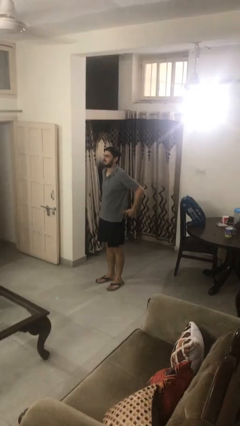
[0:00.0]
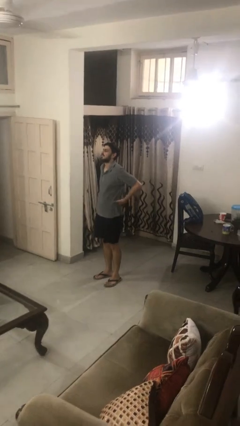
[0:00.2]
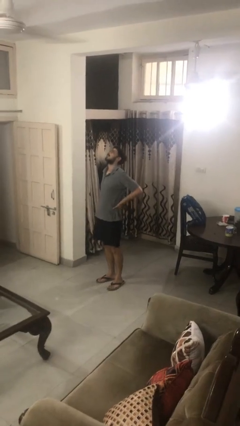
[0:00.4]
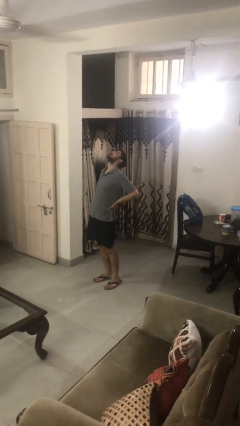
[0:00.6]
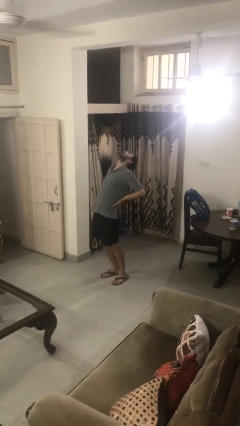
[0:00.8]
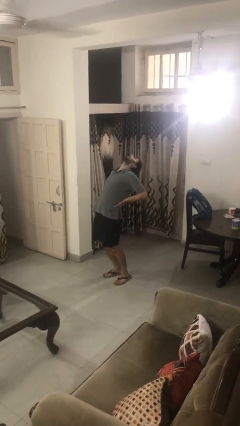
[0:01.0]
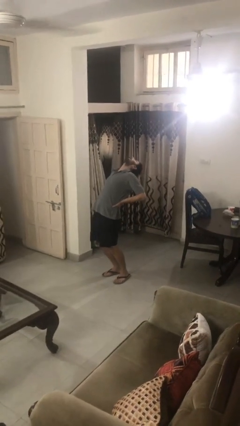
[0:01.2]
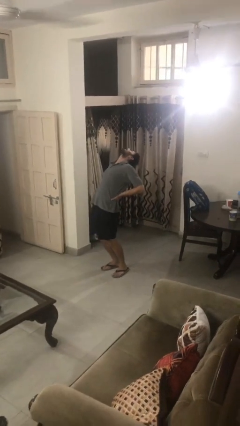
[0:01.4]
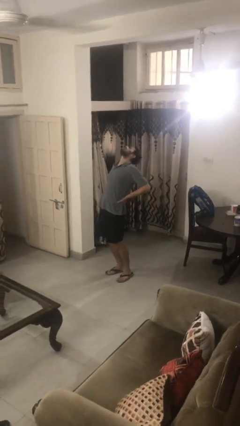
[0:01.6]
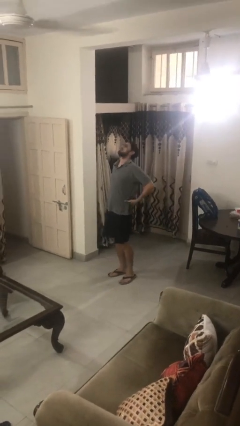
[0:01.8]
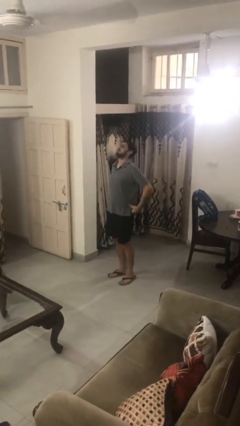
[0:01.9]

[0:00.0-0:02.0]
person stretches back

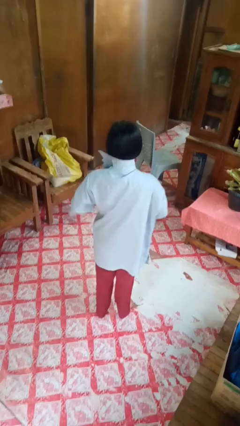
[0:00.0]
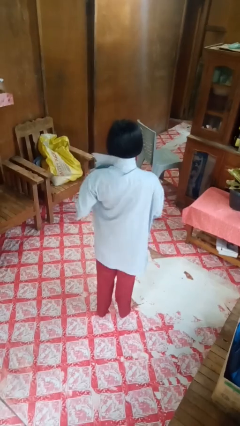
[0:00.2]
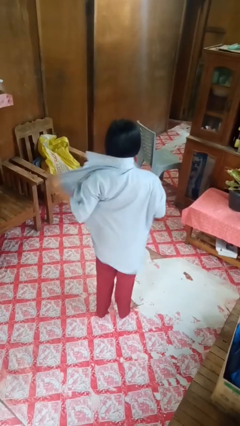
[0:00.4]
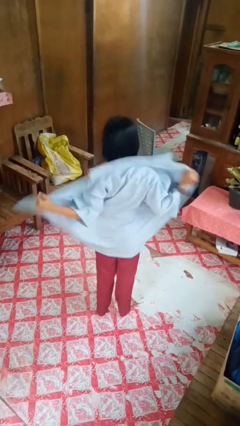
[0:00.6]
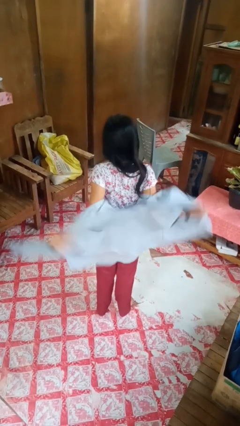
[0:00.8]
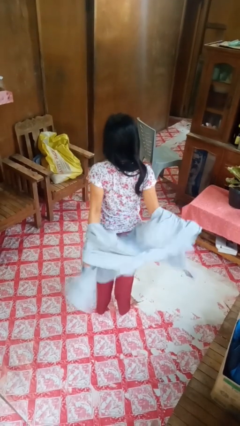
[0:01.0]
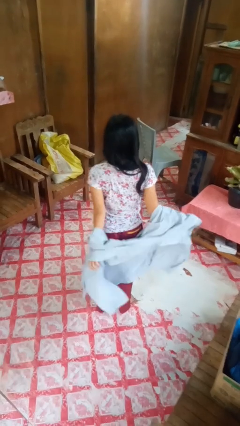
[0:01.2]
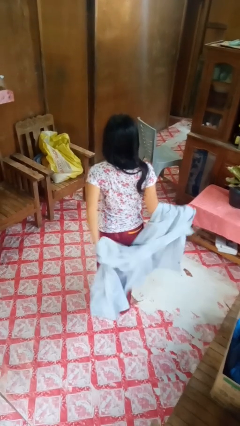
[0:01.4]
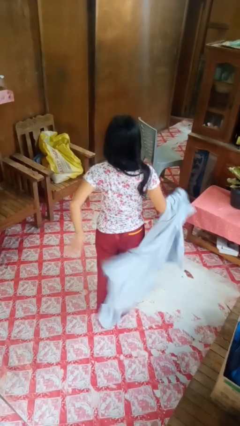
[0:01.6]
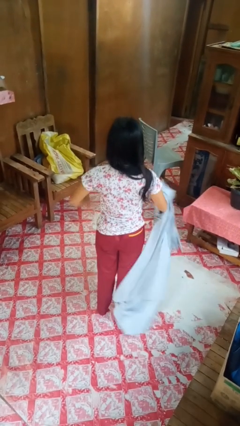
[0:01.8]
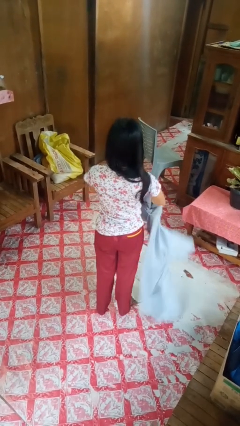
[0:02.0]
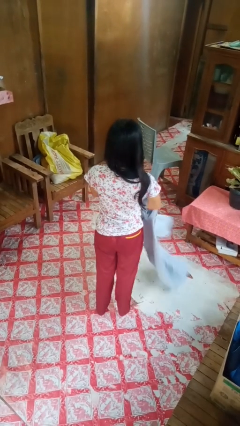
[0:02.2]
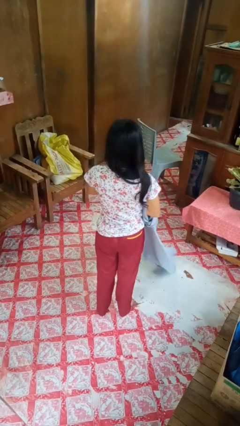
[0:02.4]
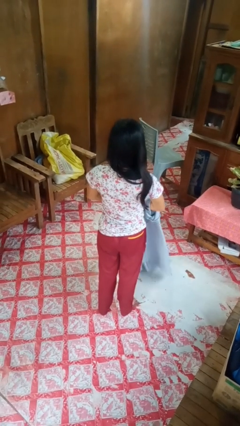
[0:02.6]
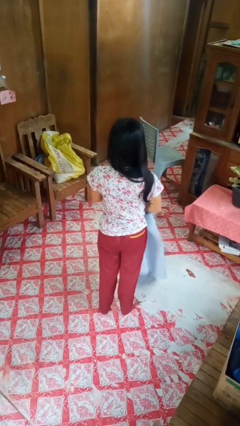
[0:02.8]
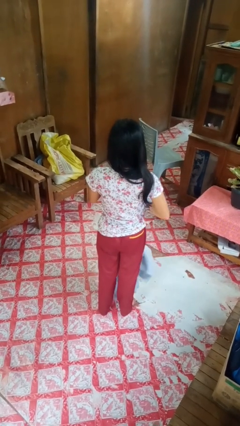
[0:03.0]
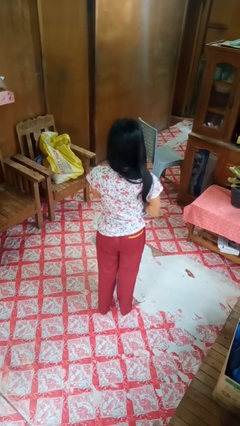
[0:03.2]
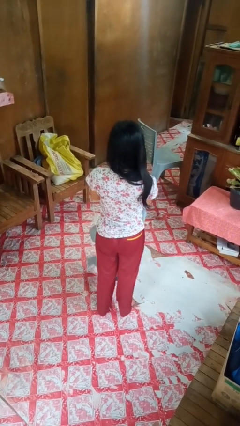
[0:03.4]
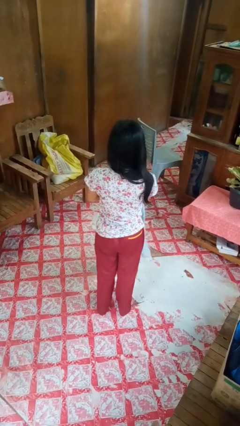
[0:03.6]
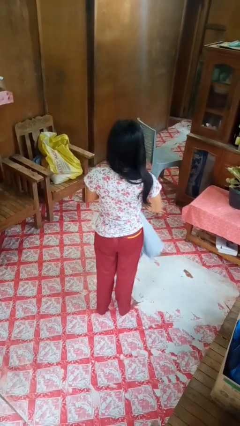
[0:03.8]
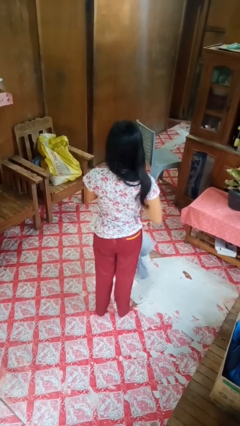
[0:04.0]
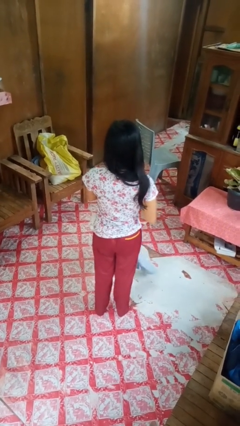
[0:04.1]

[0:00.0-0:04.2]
person takes off shirt

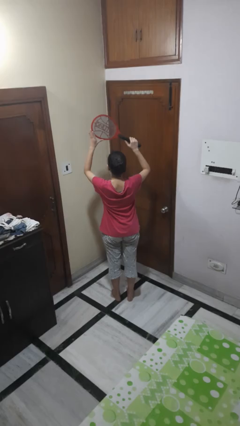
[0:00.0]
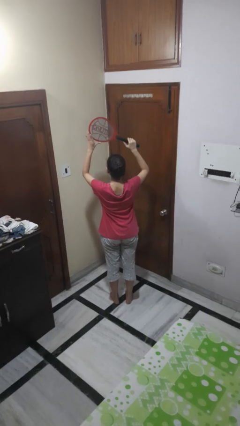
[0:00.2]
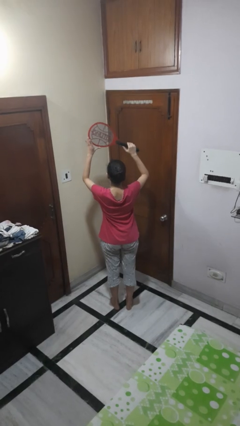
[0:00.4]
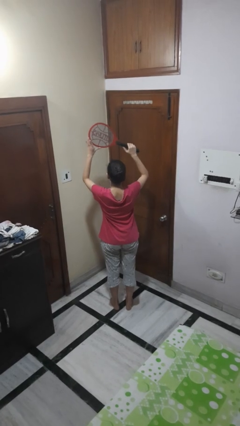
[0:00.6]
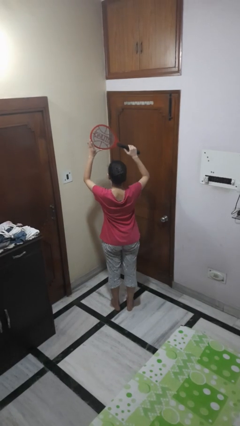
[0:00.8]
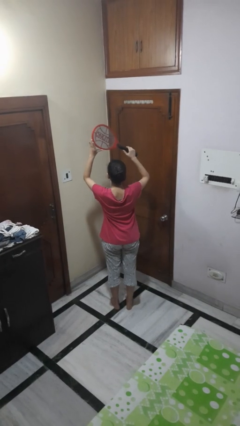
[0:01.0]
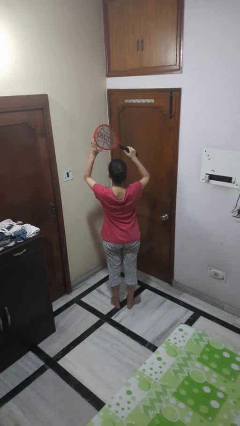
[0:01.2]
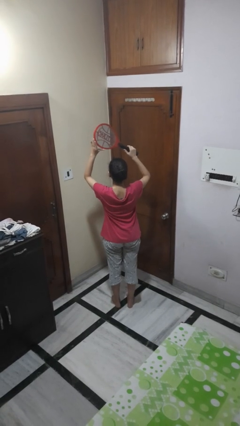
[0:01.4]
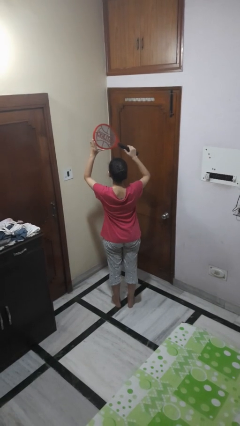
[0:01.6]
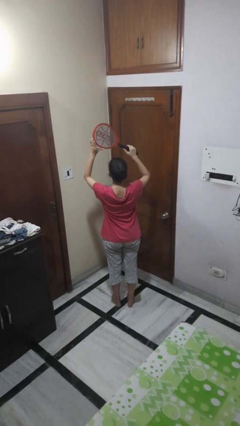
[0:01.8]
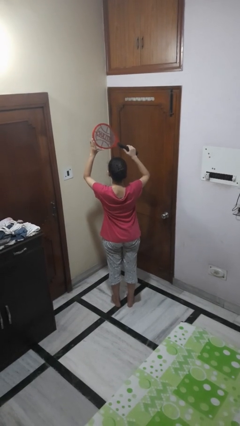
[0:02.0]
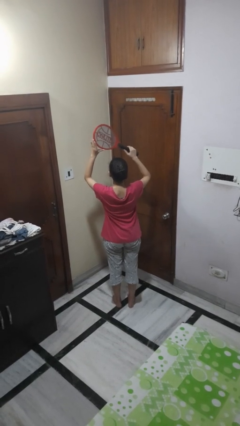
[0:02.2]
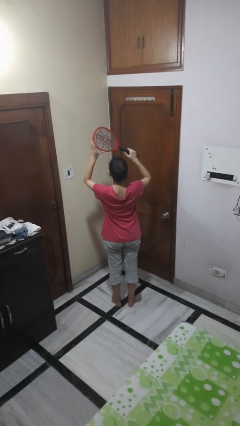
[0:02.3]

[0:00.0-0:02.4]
person holds object above head

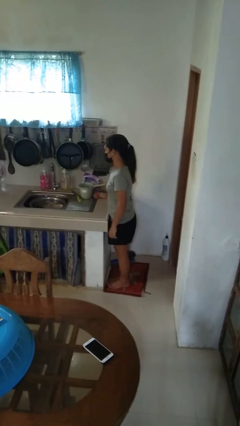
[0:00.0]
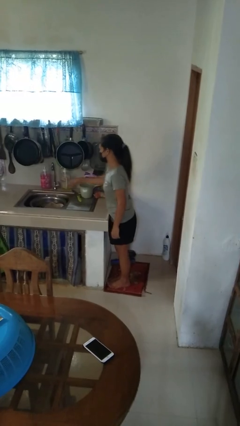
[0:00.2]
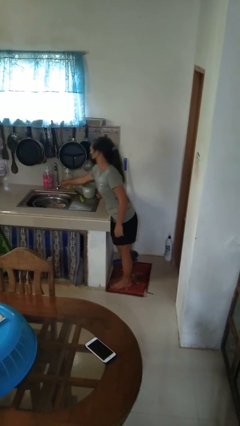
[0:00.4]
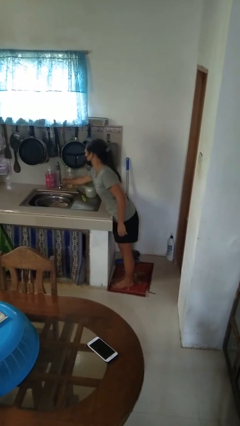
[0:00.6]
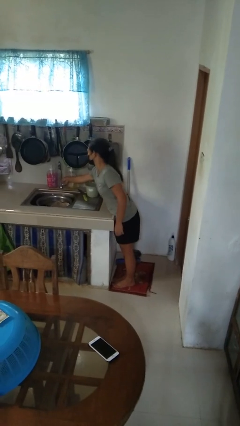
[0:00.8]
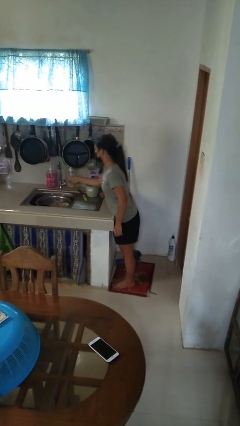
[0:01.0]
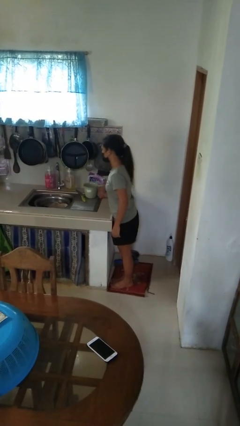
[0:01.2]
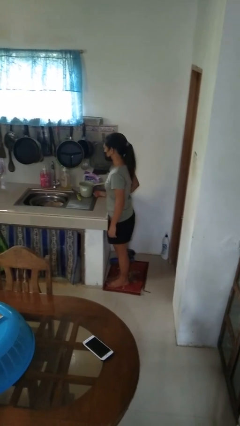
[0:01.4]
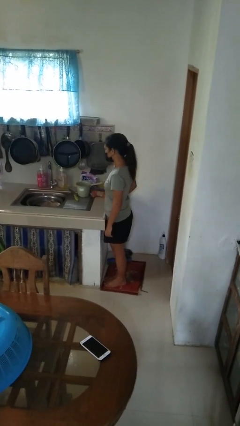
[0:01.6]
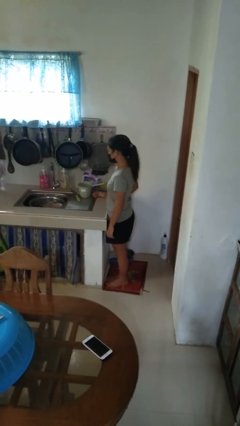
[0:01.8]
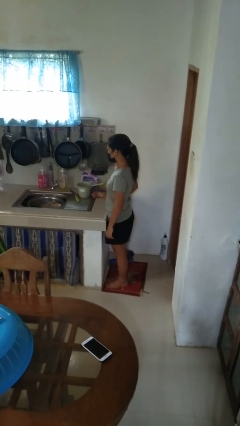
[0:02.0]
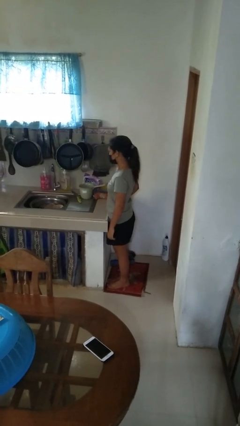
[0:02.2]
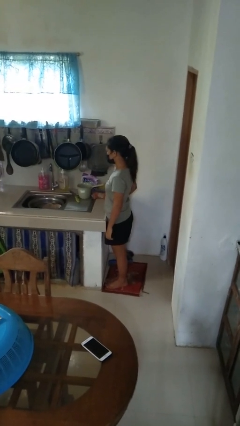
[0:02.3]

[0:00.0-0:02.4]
person turns off faucet

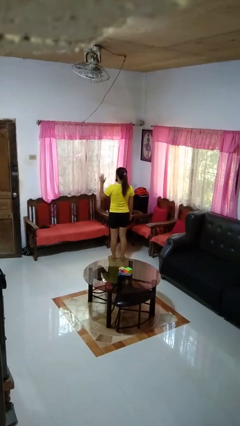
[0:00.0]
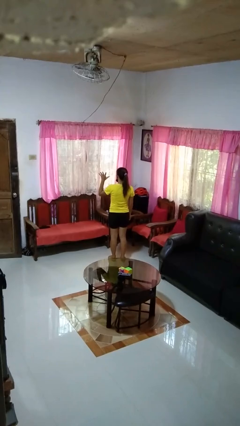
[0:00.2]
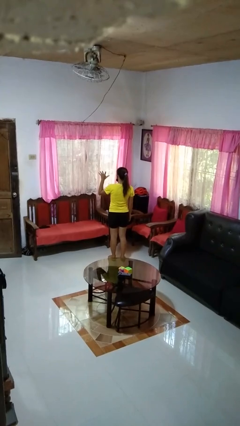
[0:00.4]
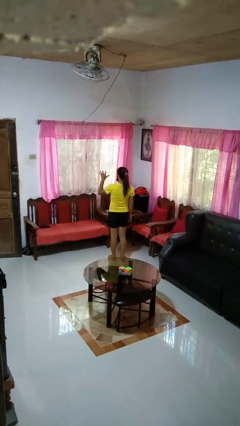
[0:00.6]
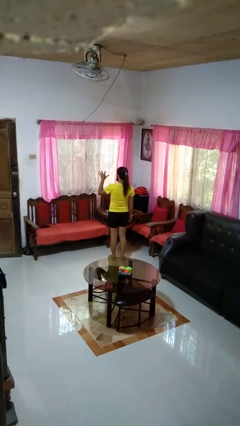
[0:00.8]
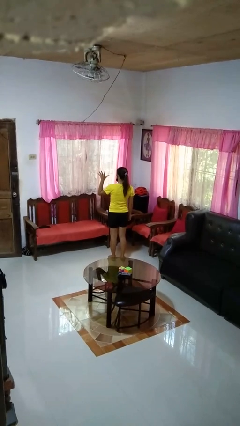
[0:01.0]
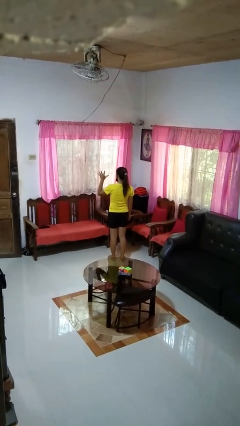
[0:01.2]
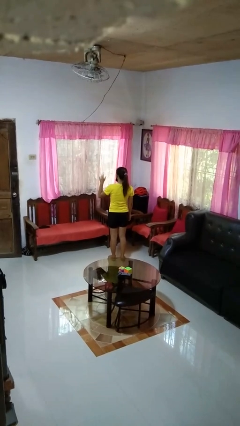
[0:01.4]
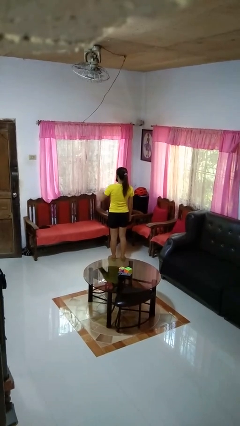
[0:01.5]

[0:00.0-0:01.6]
person gestures number five

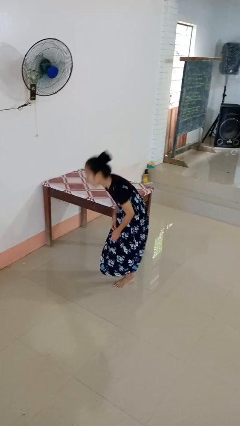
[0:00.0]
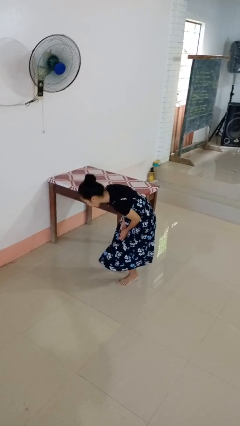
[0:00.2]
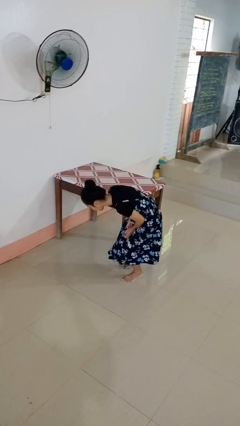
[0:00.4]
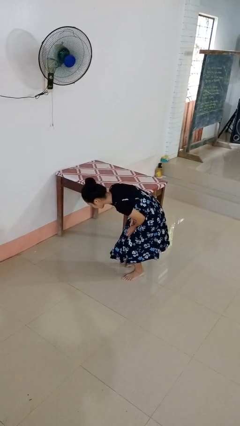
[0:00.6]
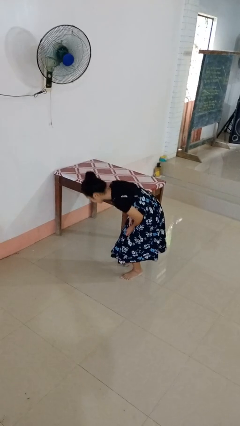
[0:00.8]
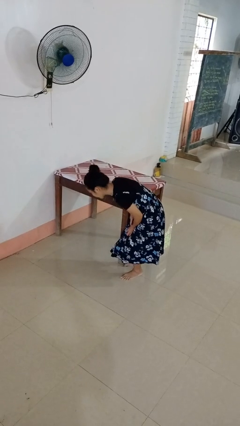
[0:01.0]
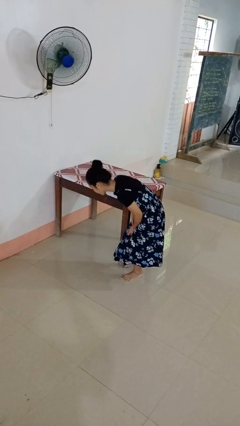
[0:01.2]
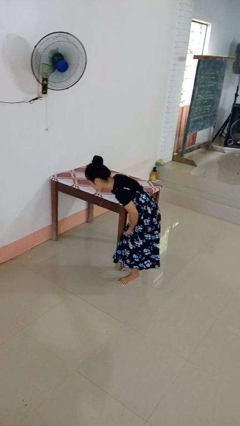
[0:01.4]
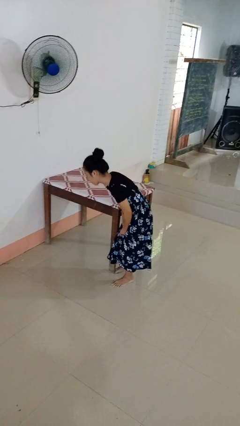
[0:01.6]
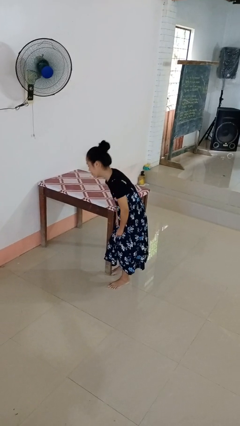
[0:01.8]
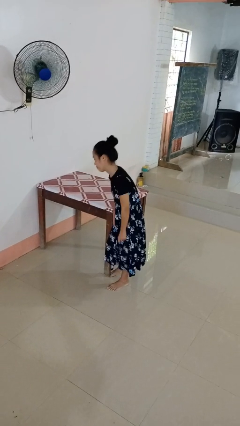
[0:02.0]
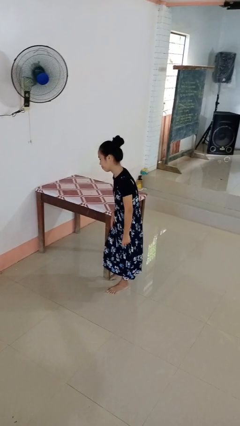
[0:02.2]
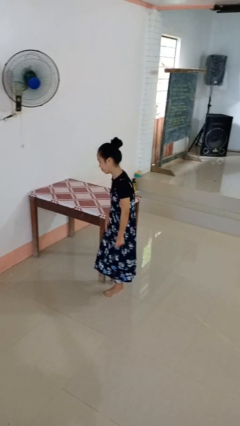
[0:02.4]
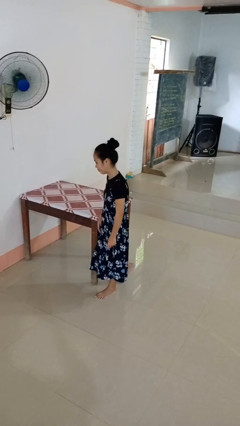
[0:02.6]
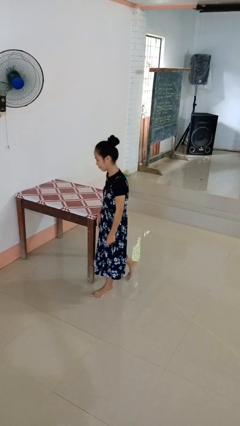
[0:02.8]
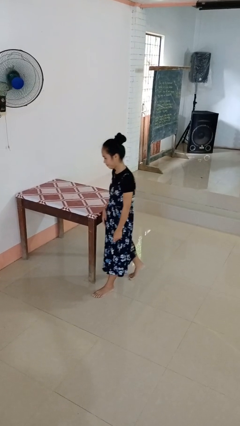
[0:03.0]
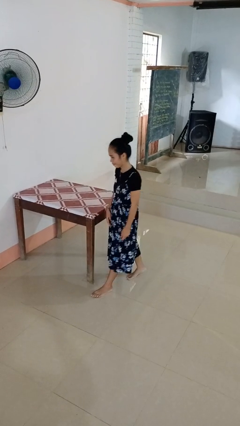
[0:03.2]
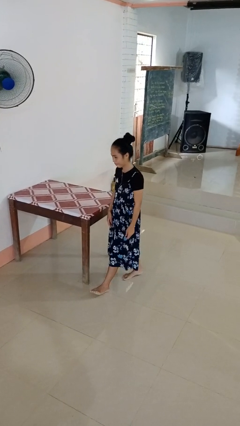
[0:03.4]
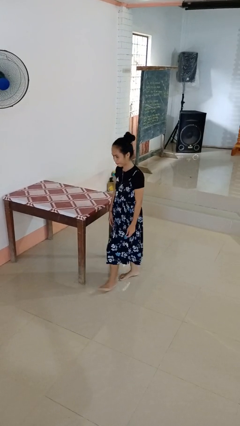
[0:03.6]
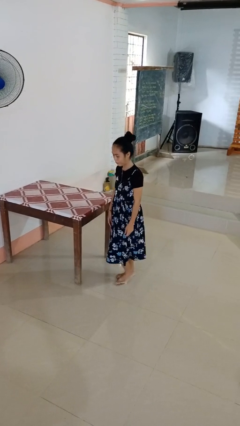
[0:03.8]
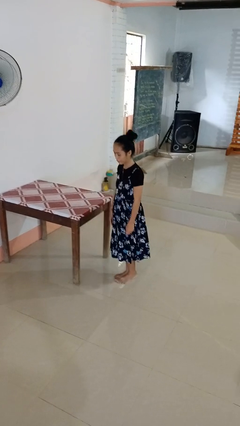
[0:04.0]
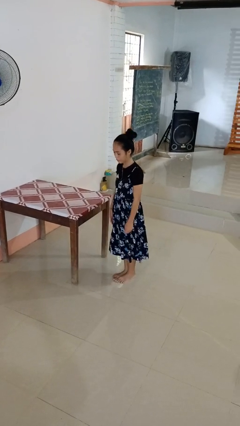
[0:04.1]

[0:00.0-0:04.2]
person stubs toe

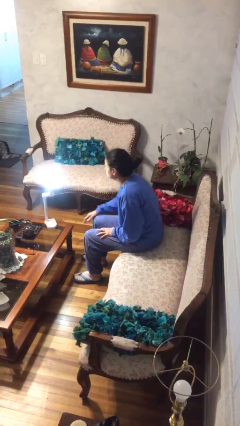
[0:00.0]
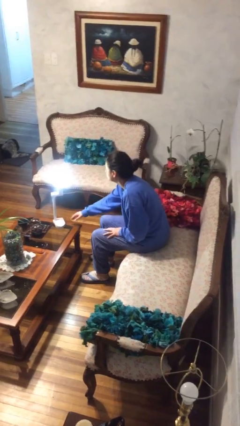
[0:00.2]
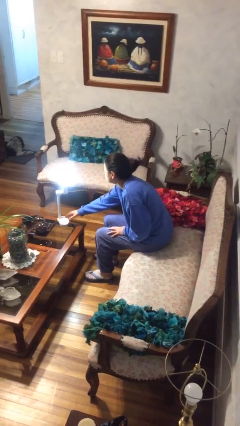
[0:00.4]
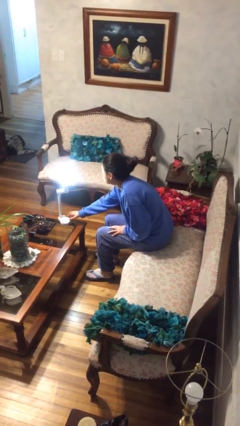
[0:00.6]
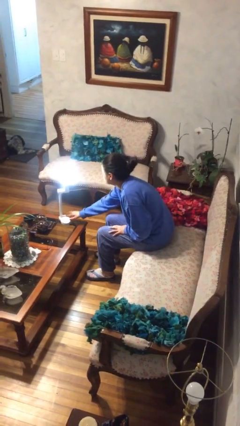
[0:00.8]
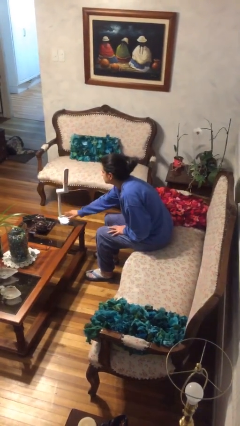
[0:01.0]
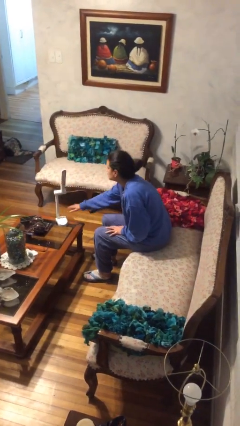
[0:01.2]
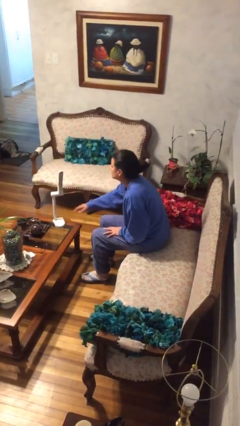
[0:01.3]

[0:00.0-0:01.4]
person turns off lamp
